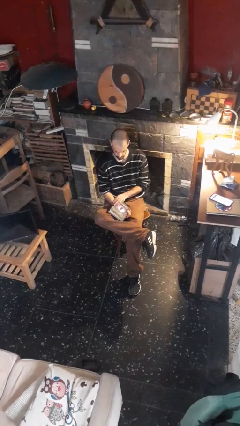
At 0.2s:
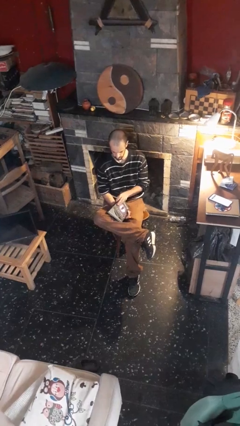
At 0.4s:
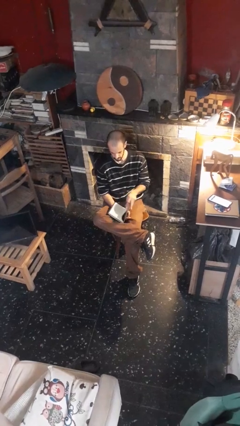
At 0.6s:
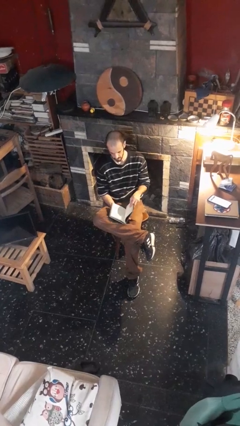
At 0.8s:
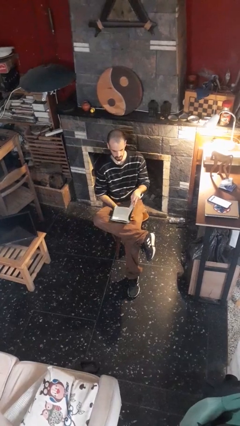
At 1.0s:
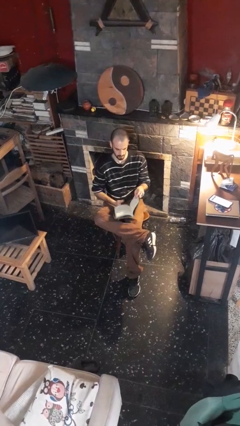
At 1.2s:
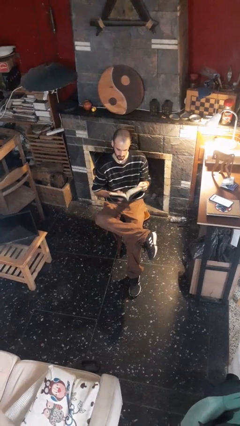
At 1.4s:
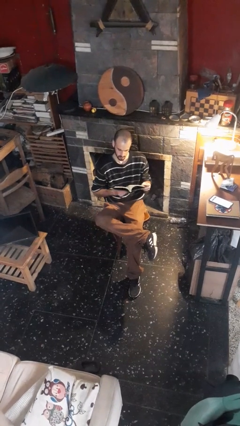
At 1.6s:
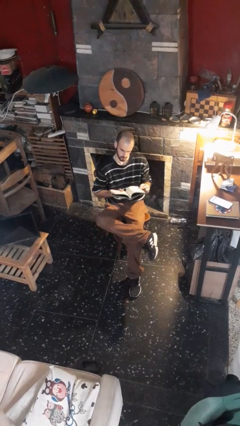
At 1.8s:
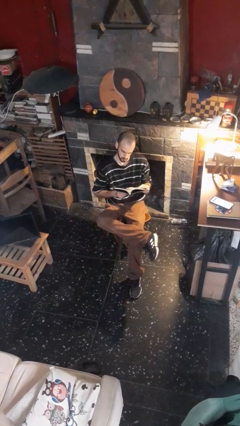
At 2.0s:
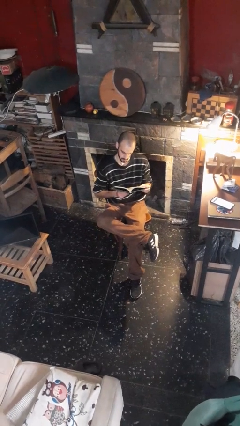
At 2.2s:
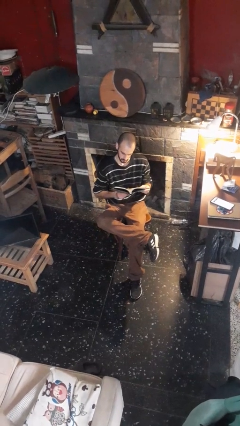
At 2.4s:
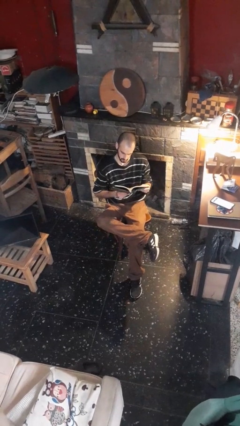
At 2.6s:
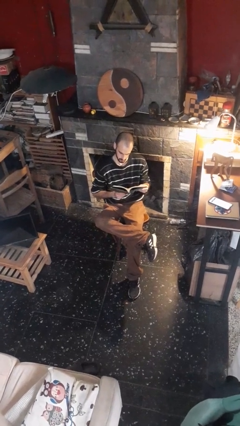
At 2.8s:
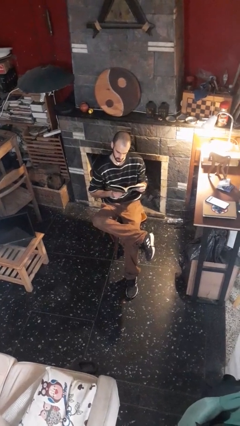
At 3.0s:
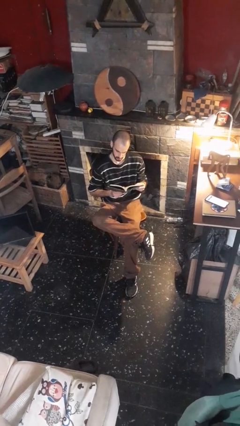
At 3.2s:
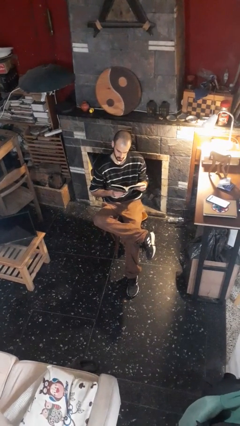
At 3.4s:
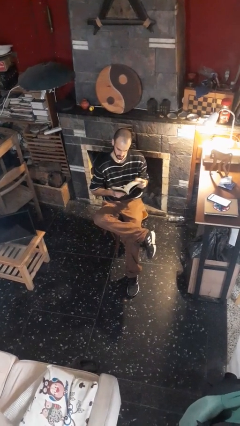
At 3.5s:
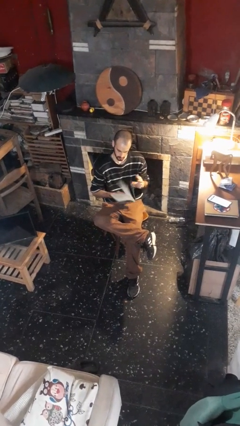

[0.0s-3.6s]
person reads book

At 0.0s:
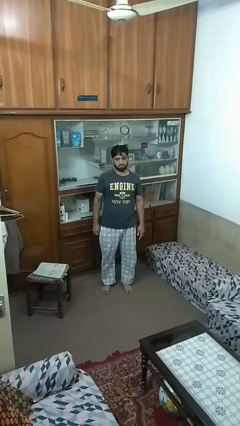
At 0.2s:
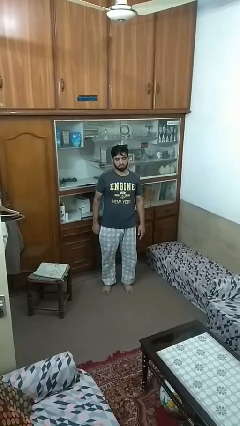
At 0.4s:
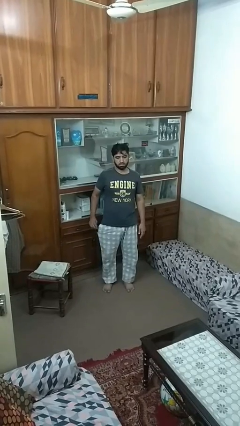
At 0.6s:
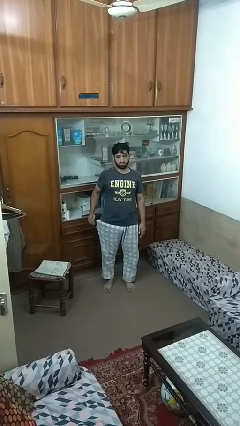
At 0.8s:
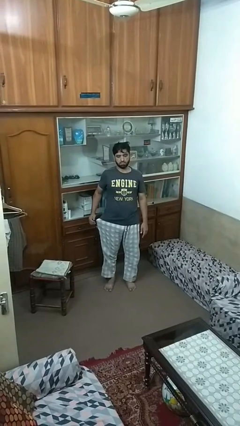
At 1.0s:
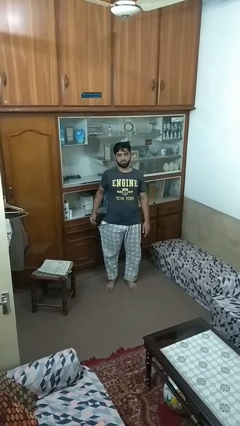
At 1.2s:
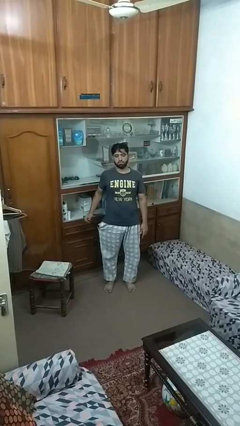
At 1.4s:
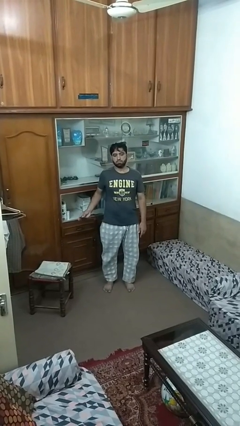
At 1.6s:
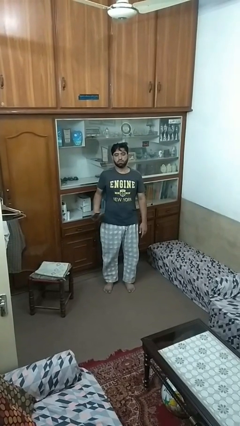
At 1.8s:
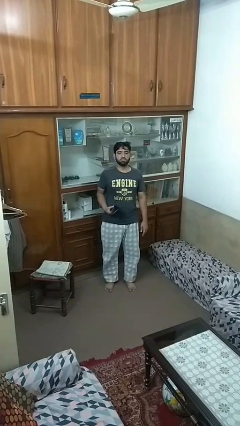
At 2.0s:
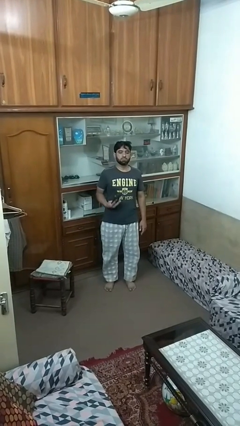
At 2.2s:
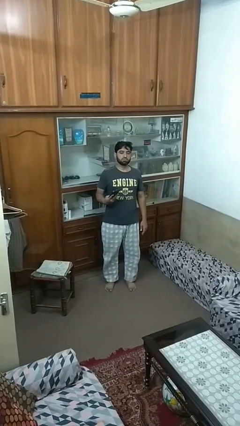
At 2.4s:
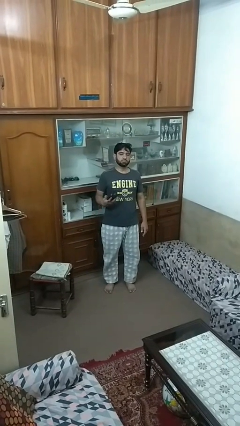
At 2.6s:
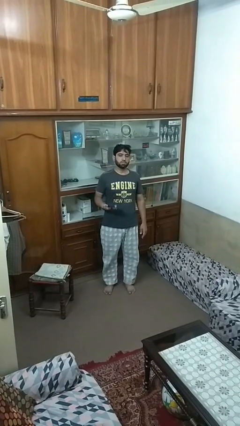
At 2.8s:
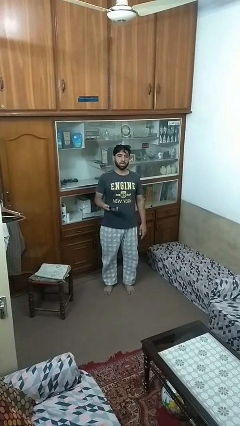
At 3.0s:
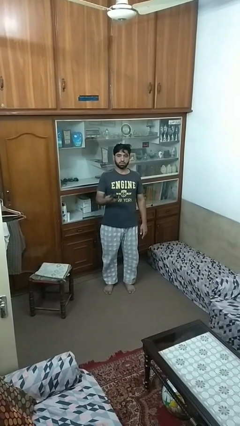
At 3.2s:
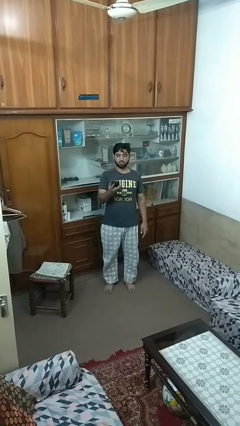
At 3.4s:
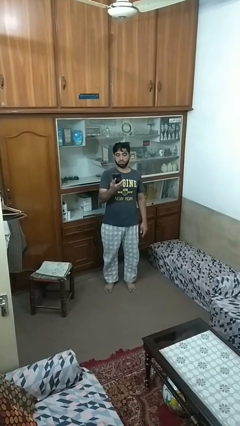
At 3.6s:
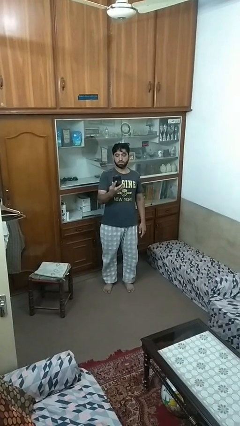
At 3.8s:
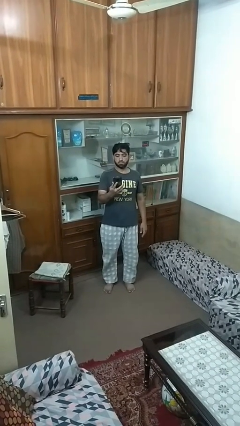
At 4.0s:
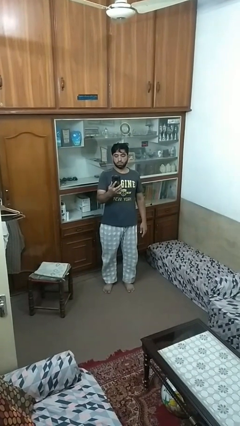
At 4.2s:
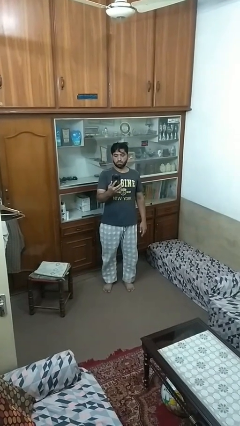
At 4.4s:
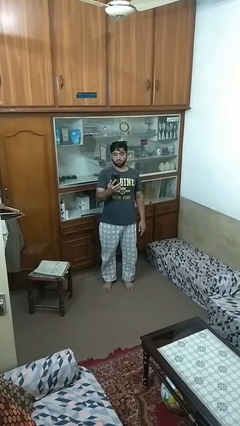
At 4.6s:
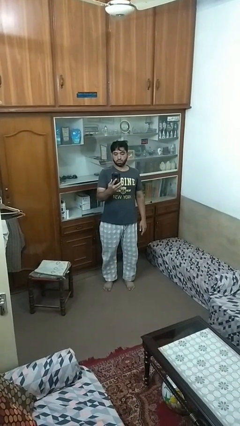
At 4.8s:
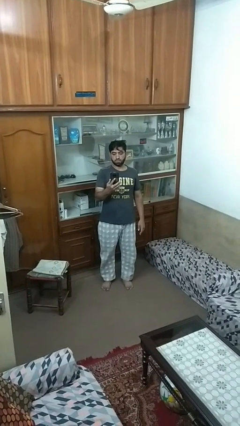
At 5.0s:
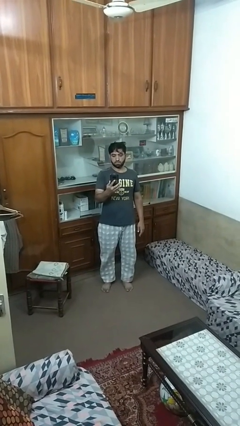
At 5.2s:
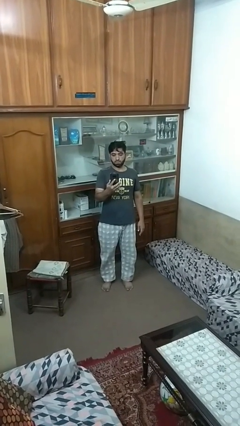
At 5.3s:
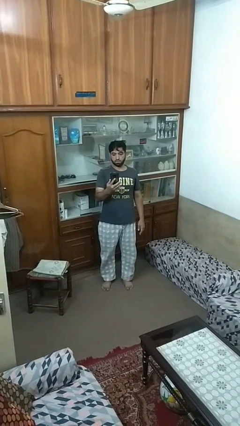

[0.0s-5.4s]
person takes phone from pocket

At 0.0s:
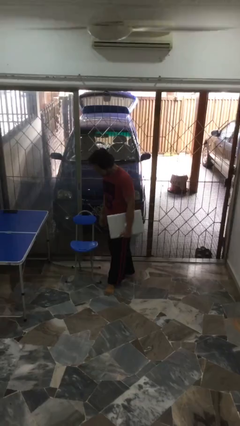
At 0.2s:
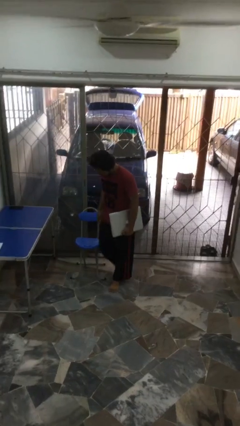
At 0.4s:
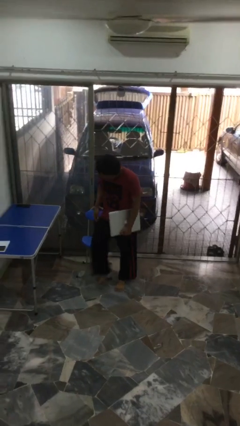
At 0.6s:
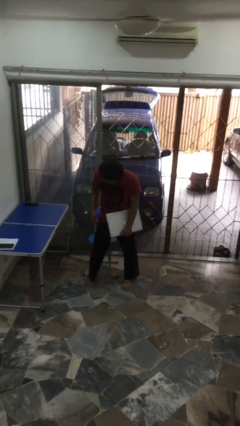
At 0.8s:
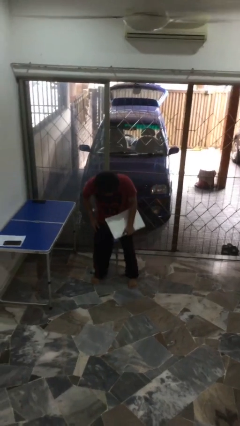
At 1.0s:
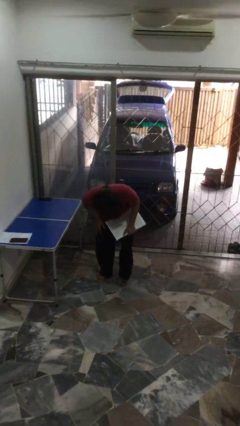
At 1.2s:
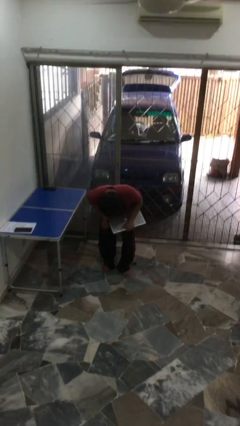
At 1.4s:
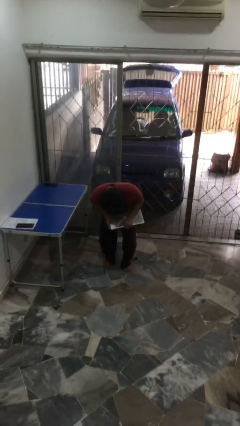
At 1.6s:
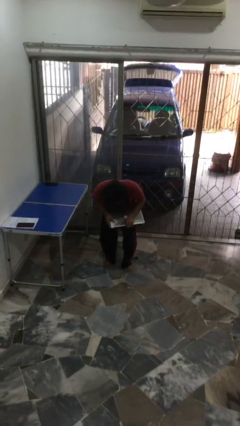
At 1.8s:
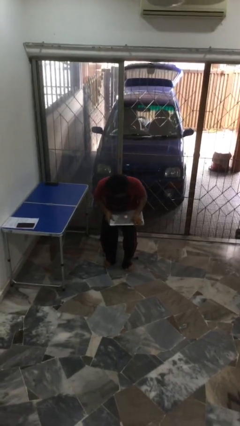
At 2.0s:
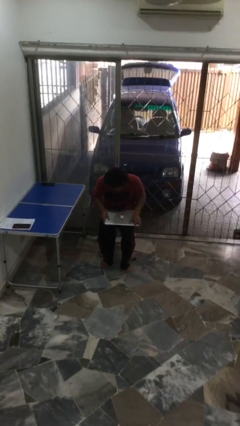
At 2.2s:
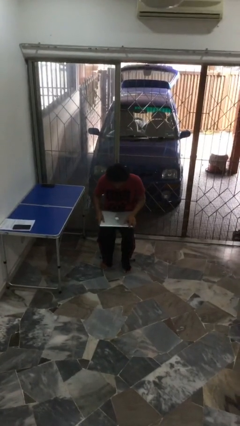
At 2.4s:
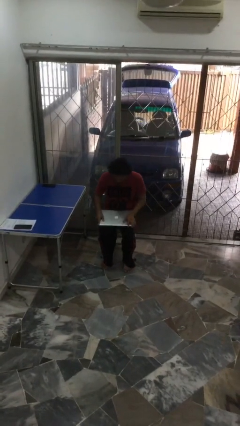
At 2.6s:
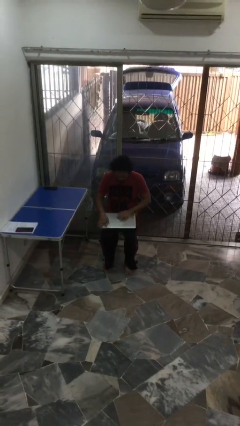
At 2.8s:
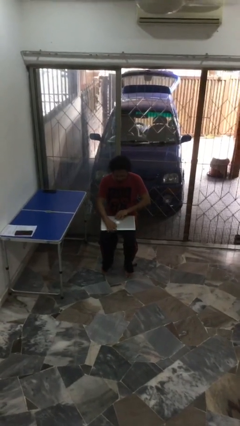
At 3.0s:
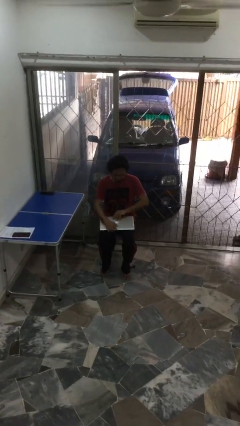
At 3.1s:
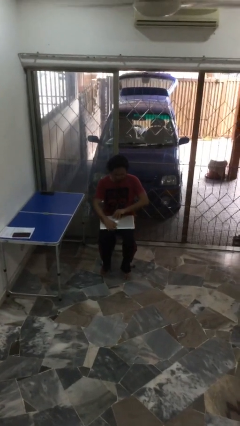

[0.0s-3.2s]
person sits down

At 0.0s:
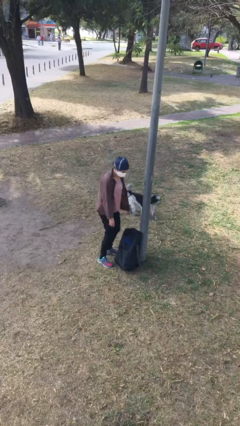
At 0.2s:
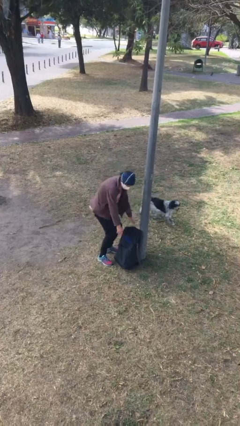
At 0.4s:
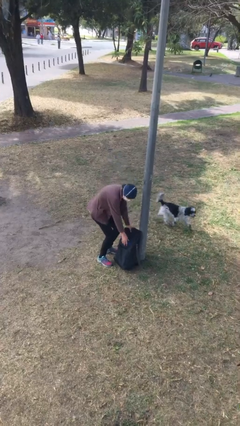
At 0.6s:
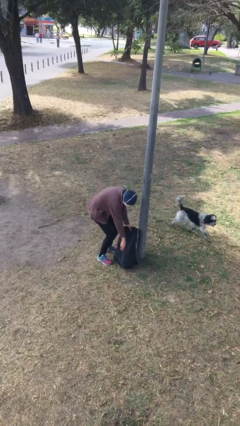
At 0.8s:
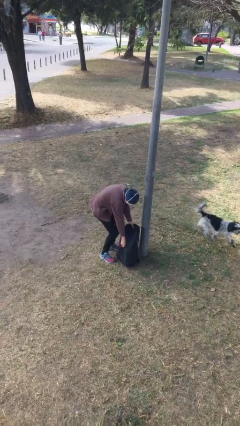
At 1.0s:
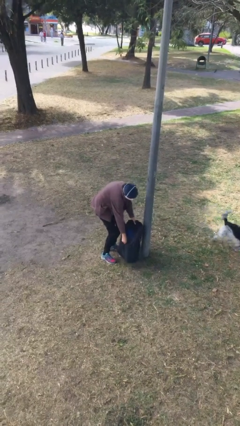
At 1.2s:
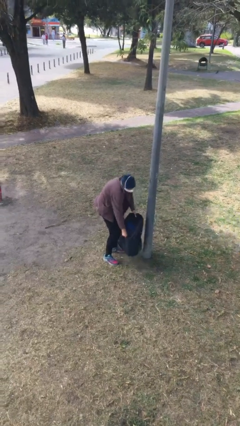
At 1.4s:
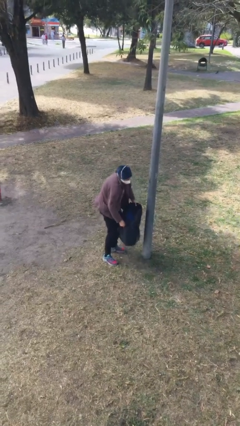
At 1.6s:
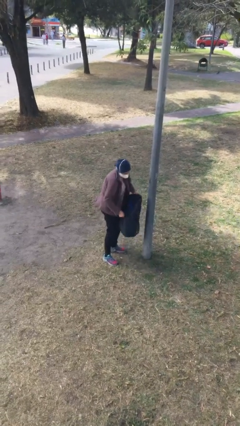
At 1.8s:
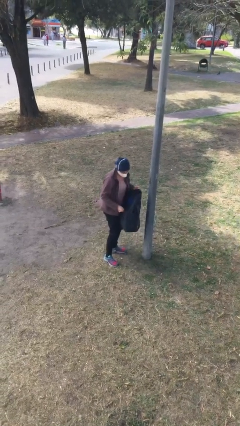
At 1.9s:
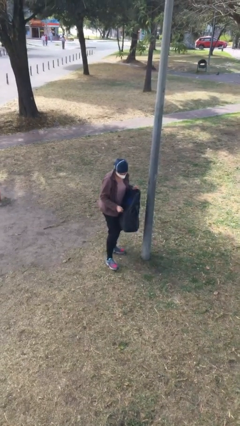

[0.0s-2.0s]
person picks up object from floor

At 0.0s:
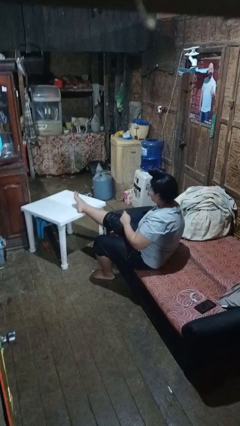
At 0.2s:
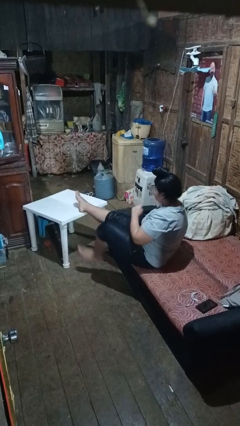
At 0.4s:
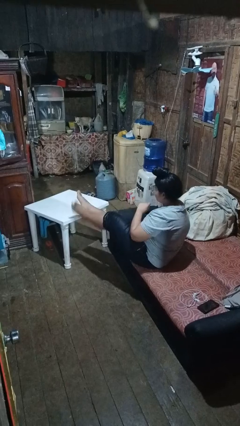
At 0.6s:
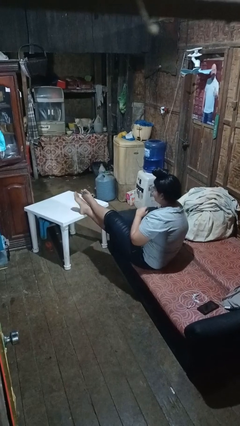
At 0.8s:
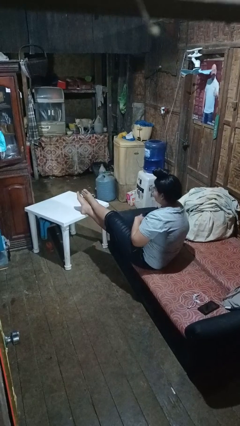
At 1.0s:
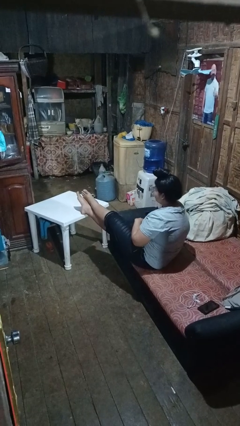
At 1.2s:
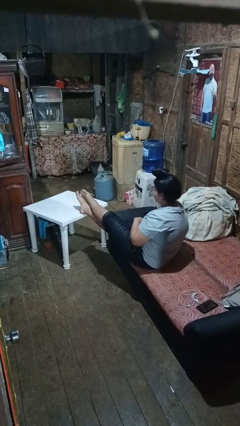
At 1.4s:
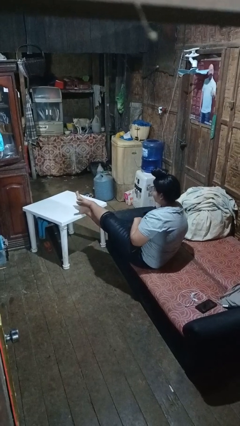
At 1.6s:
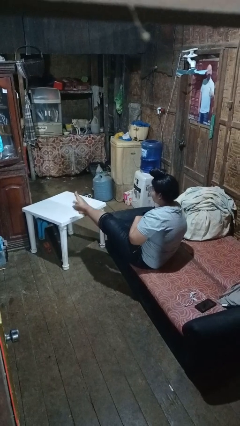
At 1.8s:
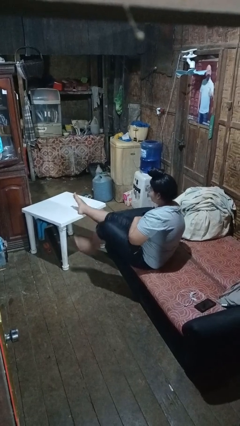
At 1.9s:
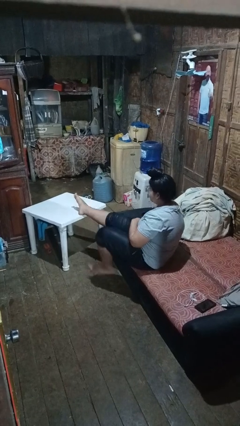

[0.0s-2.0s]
person puts feet up

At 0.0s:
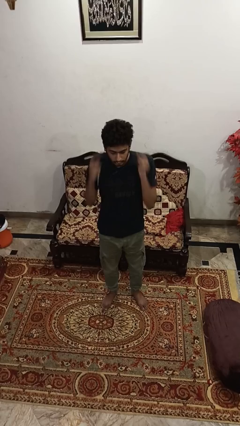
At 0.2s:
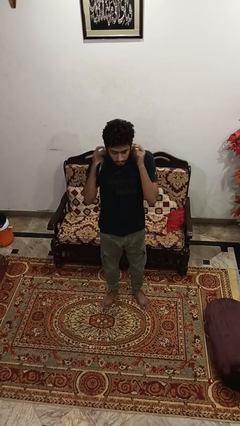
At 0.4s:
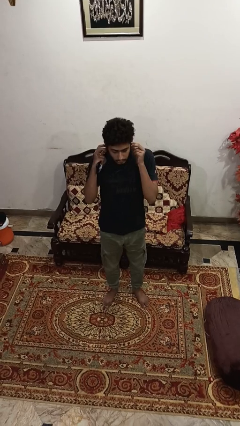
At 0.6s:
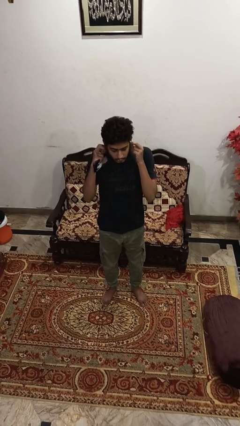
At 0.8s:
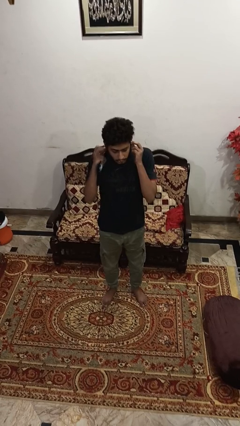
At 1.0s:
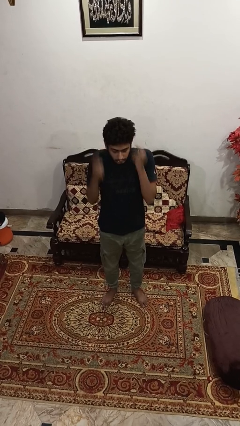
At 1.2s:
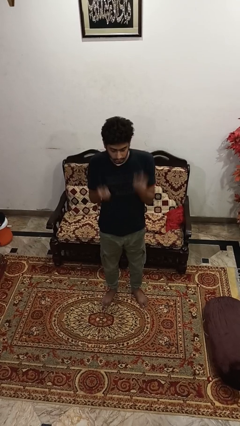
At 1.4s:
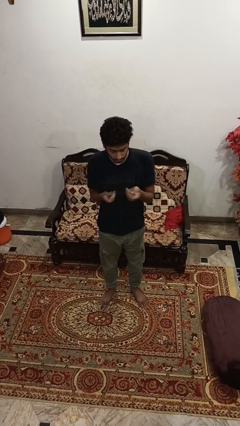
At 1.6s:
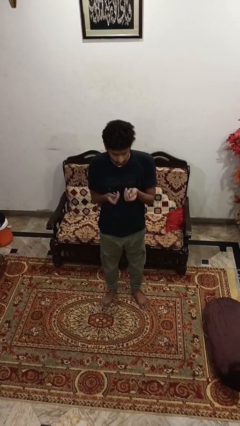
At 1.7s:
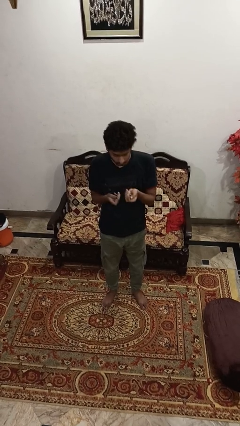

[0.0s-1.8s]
person takes off headphones
